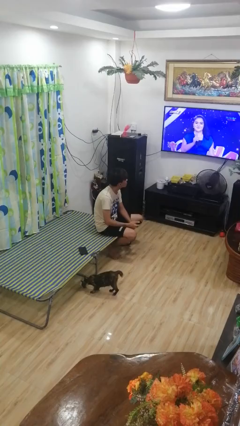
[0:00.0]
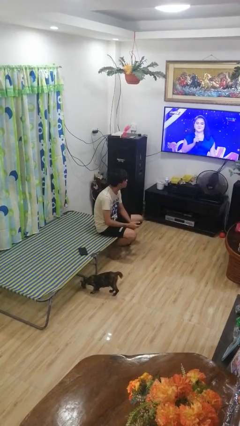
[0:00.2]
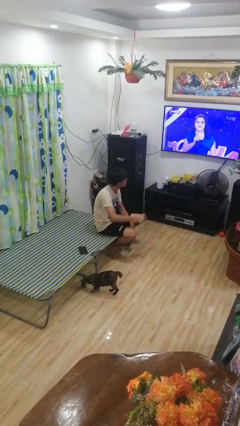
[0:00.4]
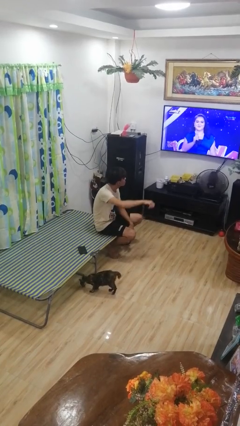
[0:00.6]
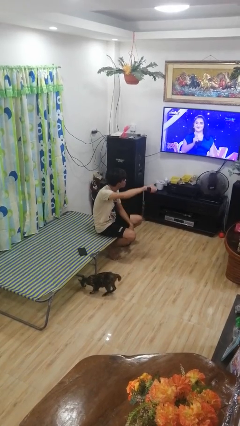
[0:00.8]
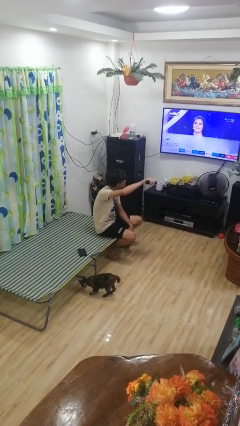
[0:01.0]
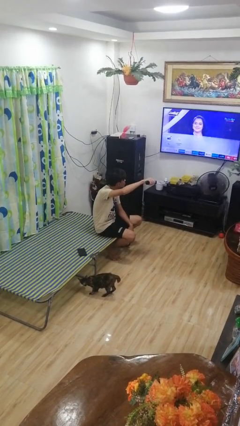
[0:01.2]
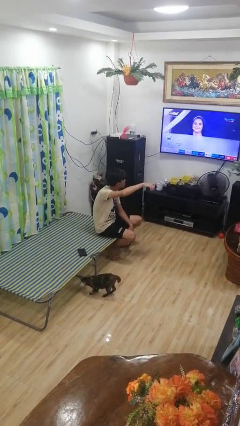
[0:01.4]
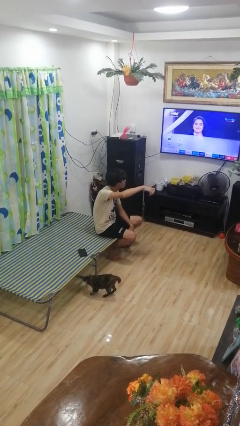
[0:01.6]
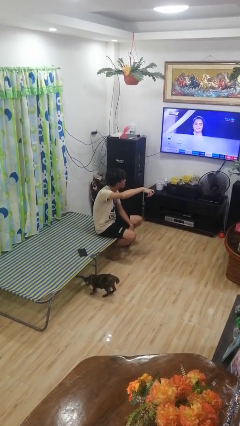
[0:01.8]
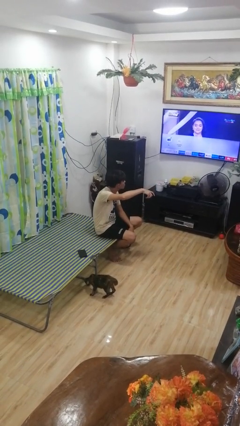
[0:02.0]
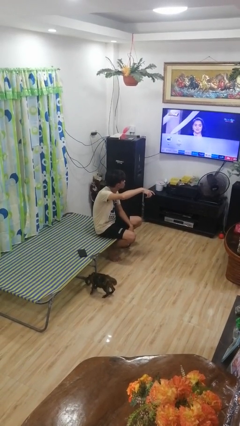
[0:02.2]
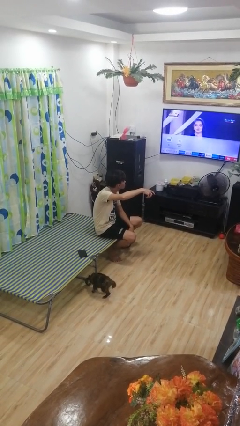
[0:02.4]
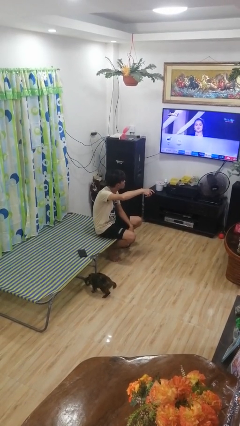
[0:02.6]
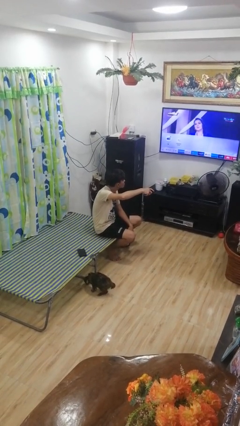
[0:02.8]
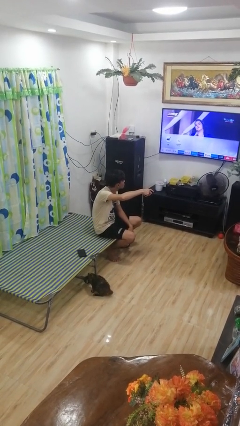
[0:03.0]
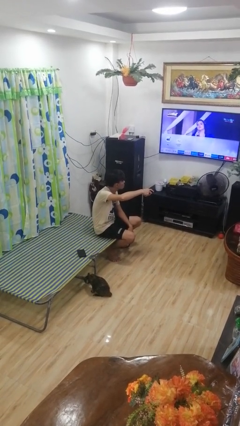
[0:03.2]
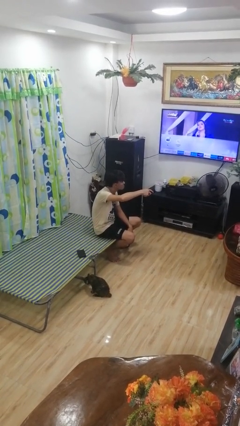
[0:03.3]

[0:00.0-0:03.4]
person uses television remote

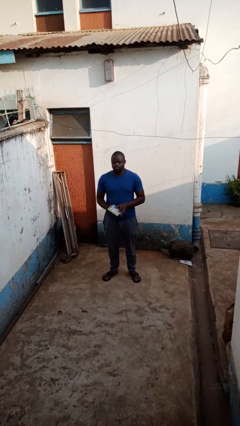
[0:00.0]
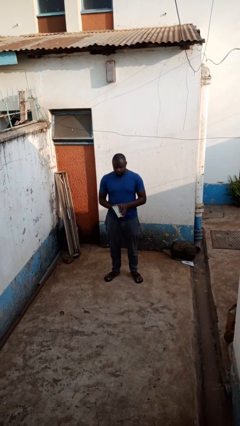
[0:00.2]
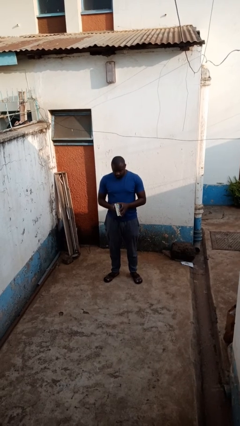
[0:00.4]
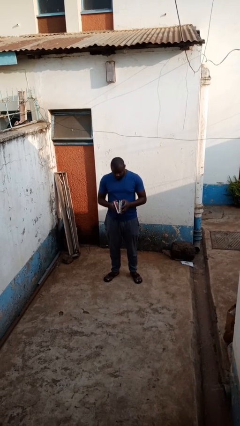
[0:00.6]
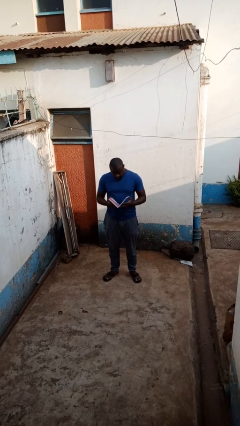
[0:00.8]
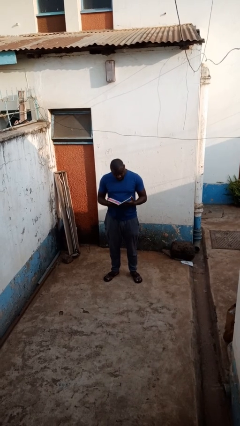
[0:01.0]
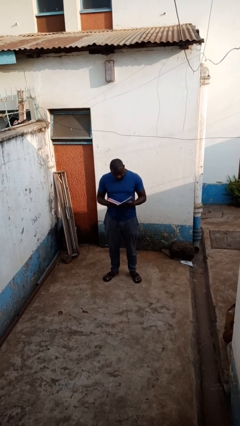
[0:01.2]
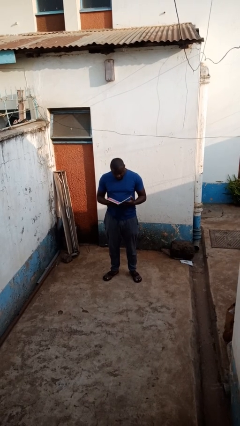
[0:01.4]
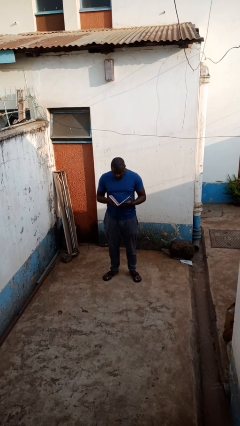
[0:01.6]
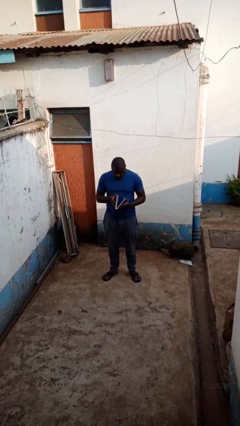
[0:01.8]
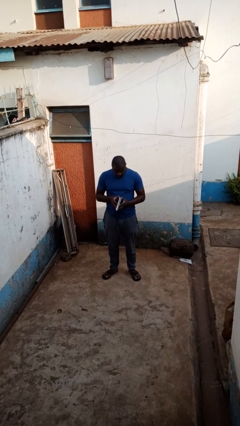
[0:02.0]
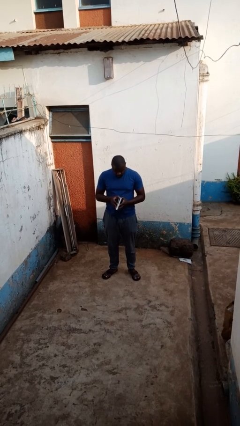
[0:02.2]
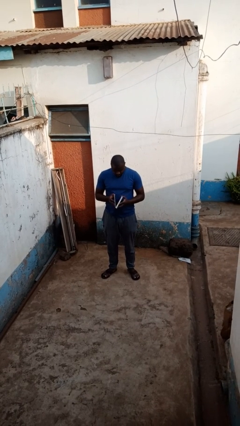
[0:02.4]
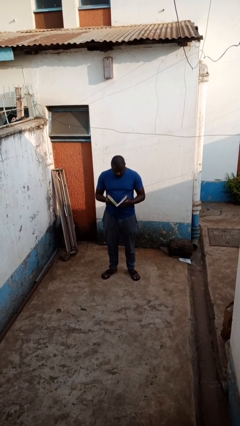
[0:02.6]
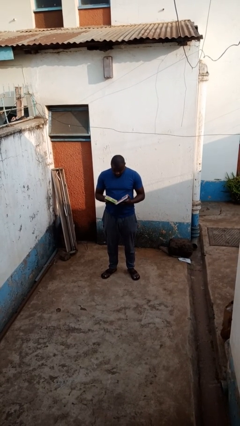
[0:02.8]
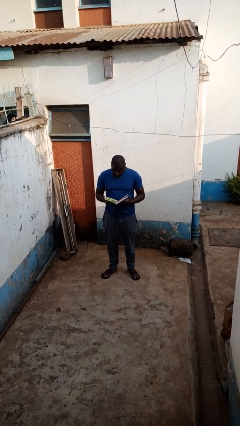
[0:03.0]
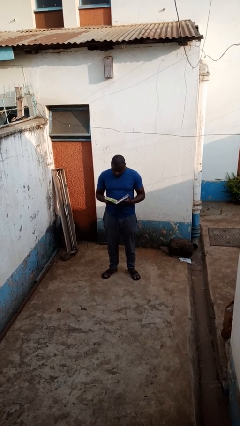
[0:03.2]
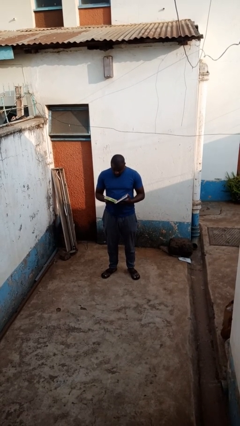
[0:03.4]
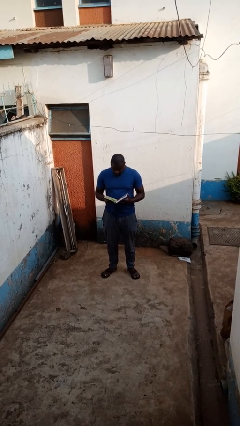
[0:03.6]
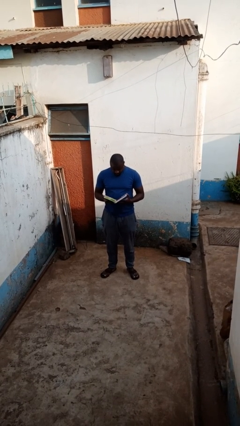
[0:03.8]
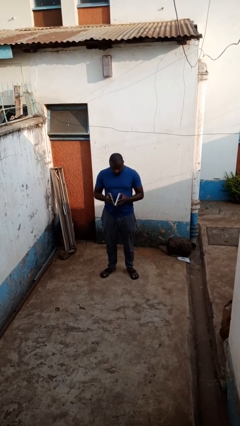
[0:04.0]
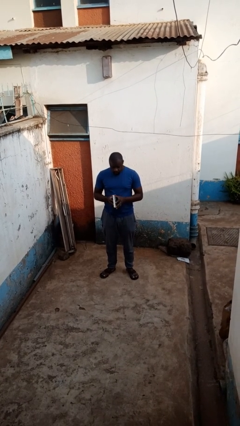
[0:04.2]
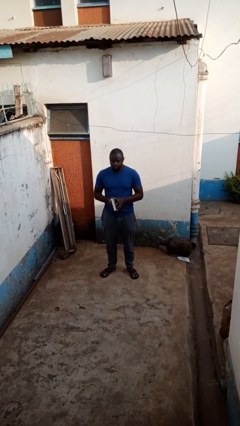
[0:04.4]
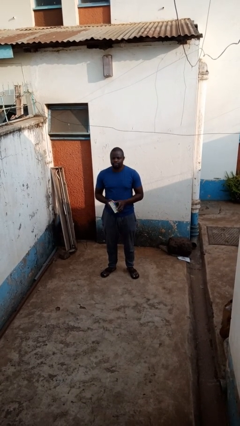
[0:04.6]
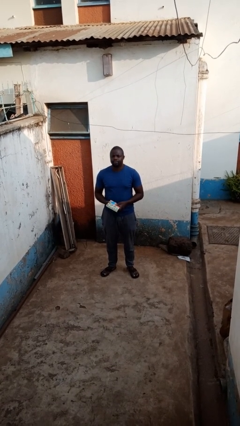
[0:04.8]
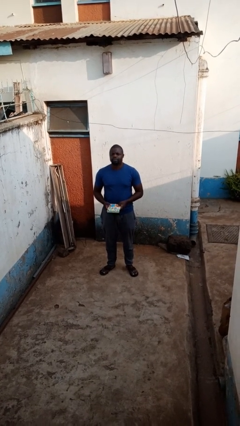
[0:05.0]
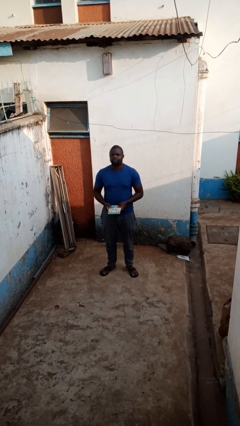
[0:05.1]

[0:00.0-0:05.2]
person reads book

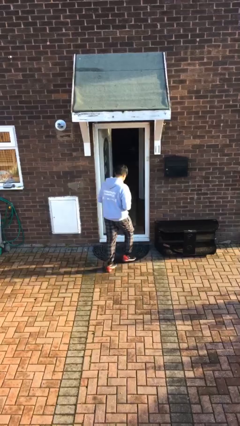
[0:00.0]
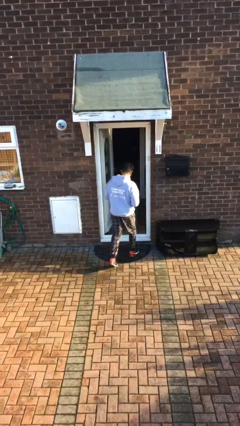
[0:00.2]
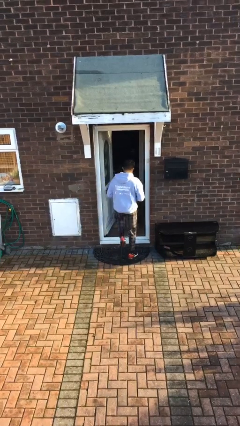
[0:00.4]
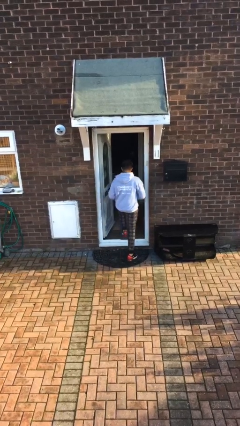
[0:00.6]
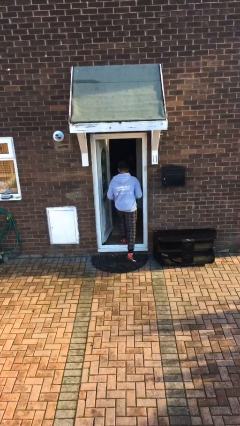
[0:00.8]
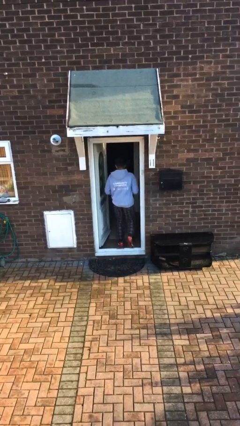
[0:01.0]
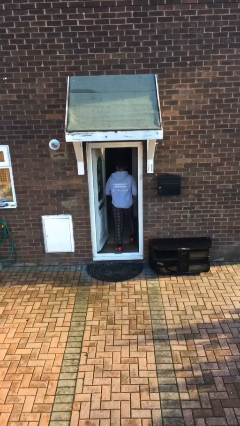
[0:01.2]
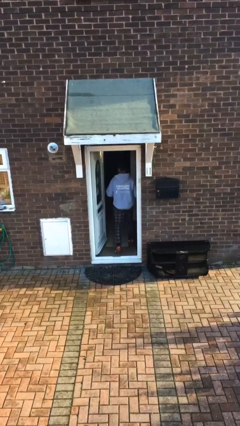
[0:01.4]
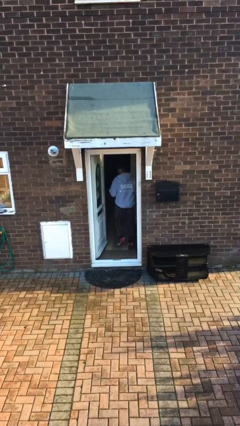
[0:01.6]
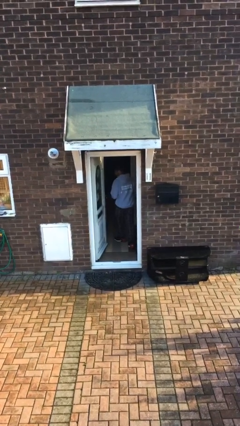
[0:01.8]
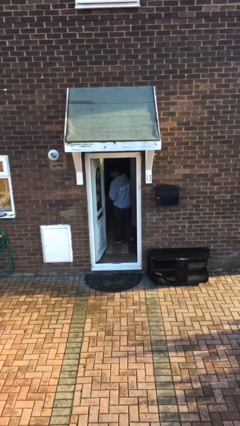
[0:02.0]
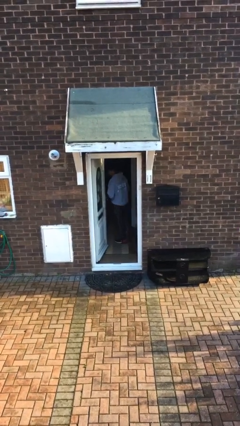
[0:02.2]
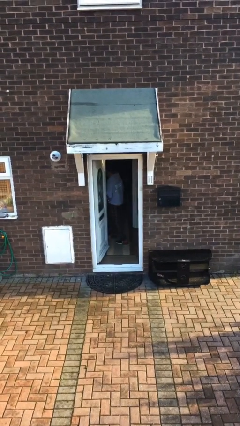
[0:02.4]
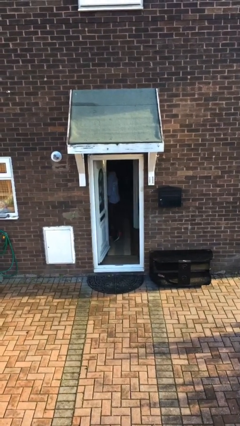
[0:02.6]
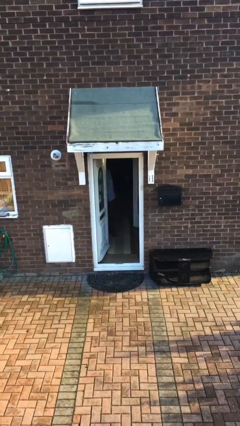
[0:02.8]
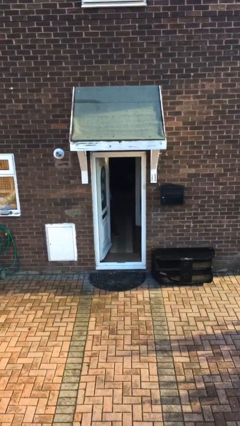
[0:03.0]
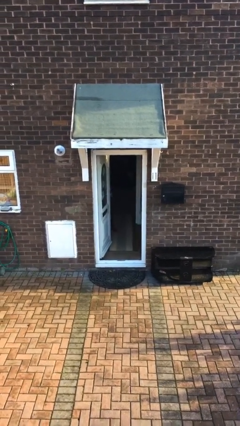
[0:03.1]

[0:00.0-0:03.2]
person exits scene through structure

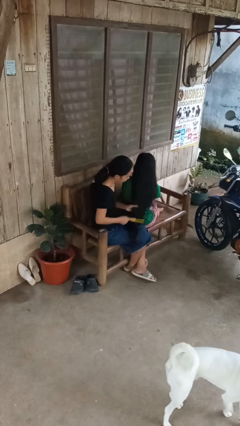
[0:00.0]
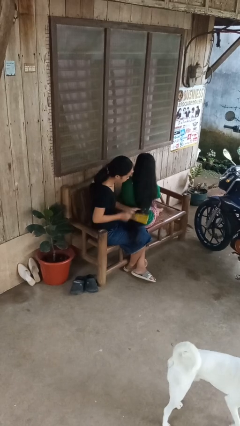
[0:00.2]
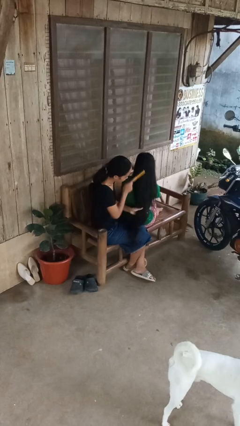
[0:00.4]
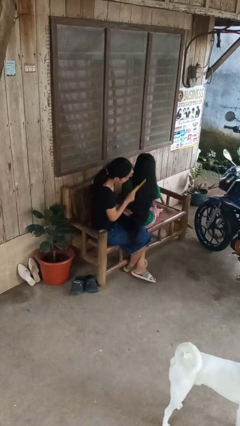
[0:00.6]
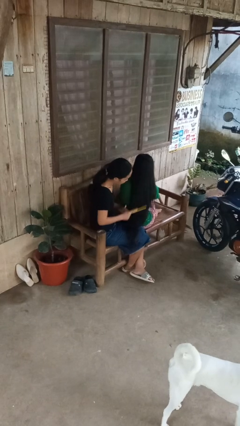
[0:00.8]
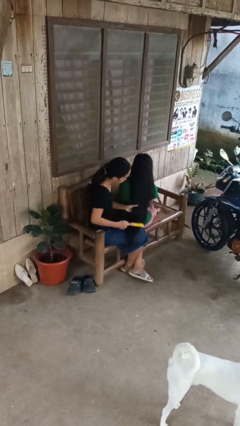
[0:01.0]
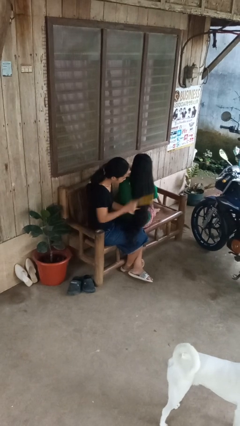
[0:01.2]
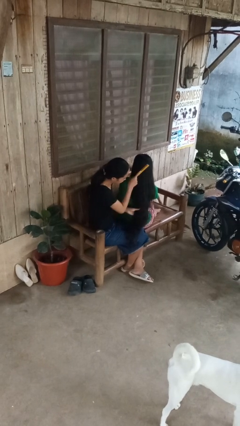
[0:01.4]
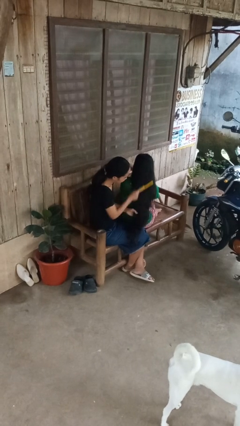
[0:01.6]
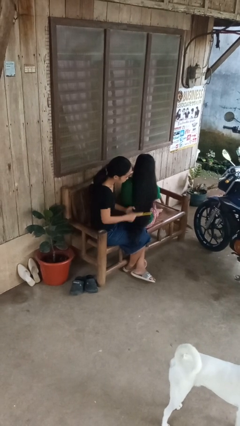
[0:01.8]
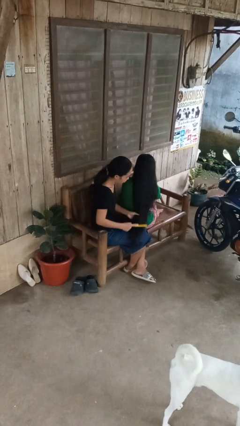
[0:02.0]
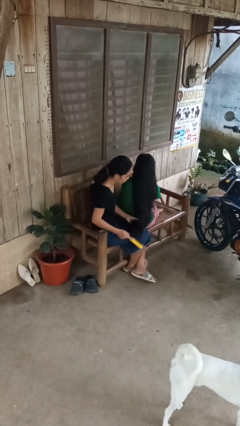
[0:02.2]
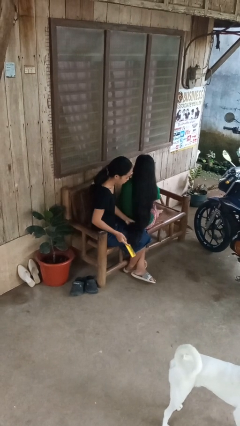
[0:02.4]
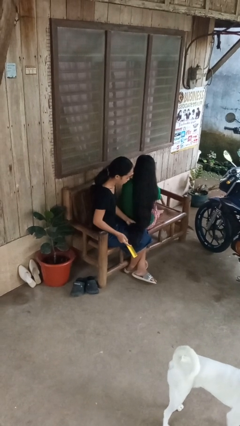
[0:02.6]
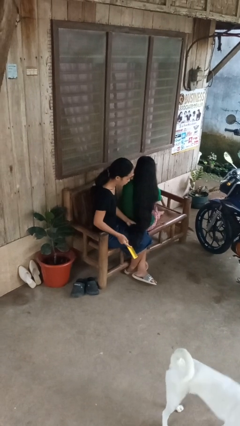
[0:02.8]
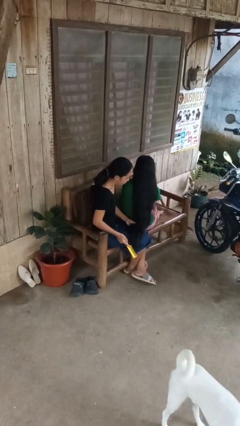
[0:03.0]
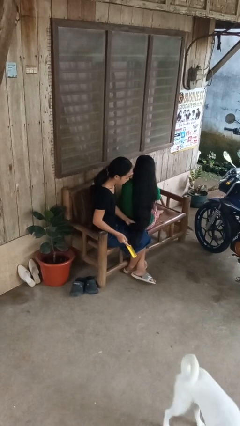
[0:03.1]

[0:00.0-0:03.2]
person brushes hair of person

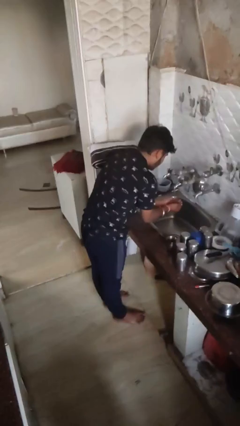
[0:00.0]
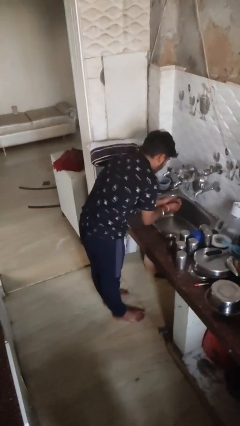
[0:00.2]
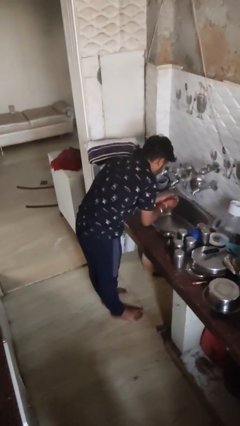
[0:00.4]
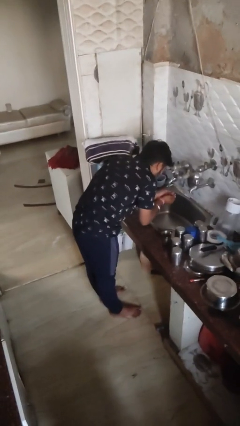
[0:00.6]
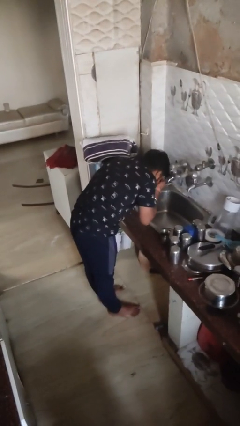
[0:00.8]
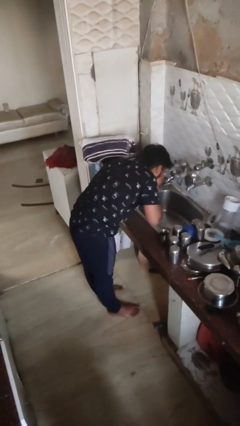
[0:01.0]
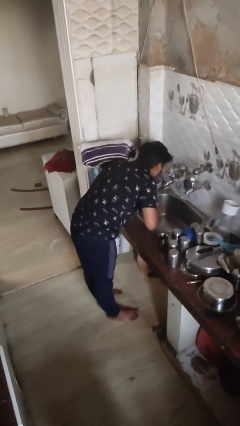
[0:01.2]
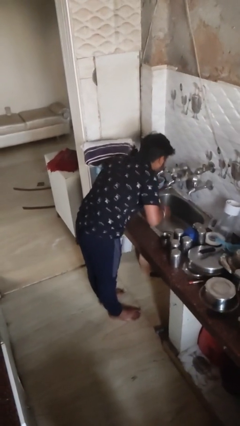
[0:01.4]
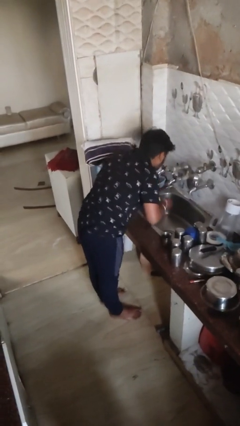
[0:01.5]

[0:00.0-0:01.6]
person washes face

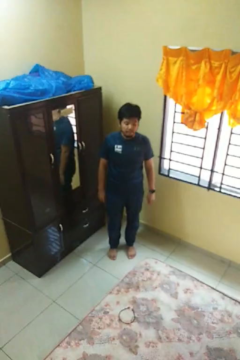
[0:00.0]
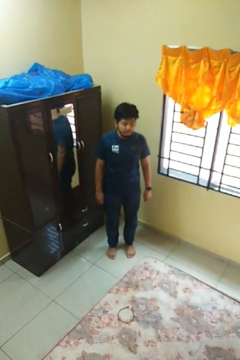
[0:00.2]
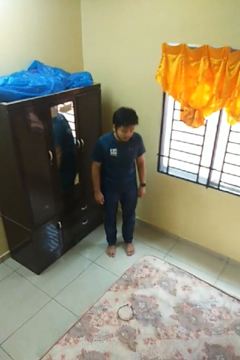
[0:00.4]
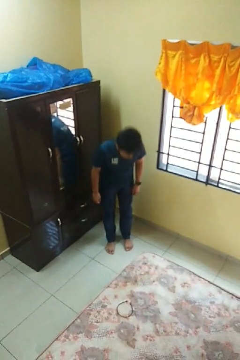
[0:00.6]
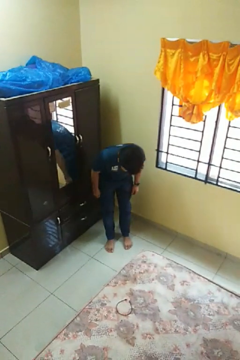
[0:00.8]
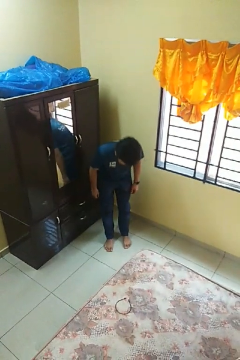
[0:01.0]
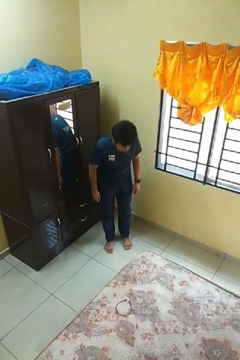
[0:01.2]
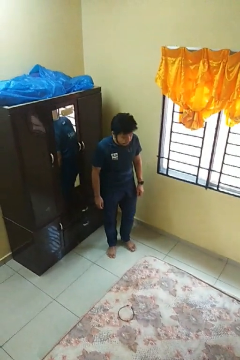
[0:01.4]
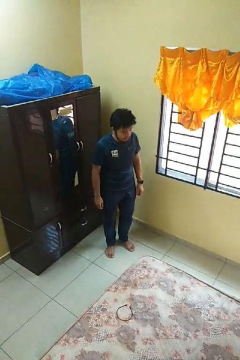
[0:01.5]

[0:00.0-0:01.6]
person bows
